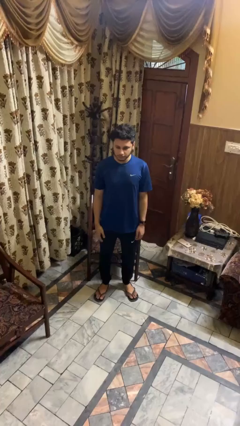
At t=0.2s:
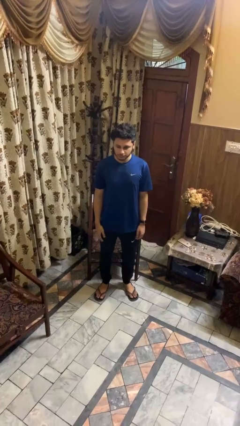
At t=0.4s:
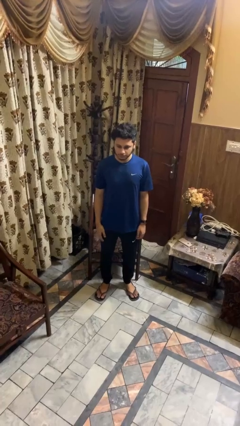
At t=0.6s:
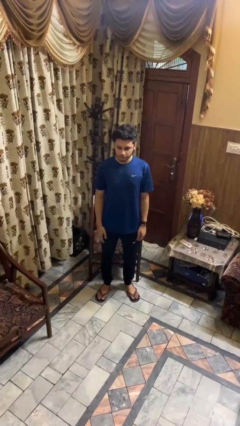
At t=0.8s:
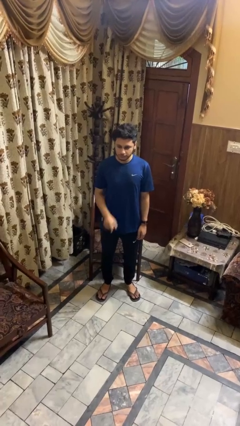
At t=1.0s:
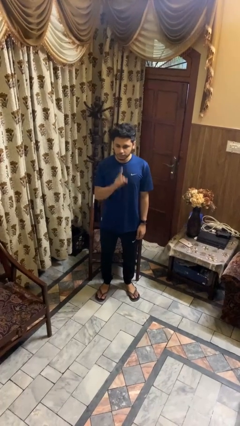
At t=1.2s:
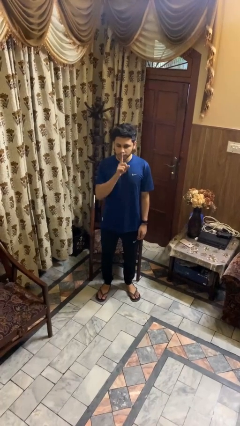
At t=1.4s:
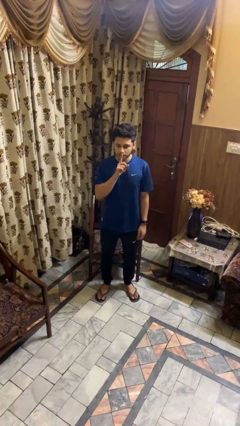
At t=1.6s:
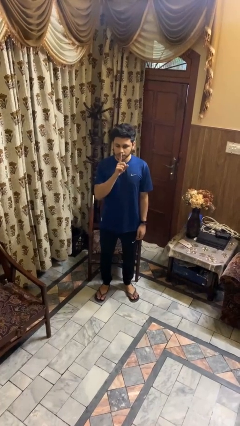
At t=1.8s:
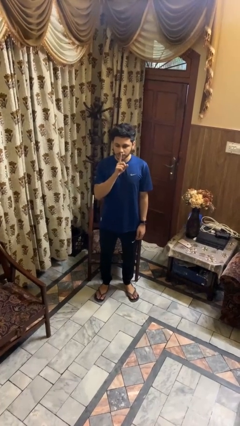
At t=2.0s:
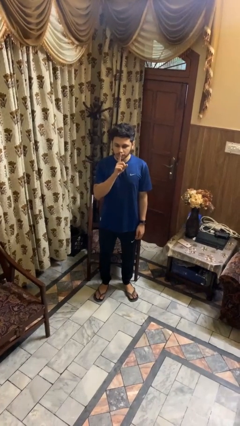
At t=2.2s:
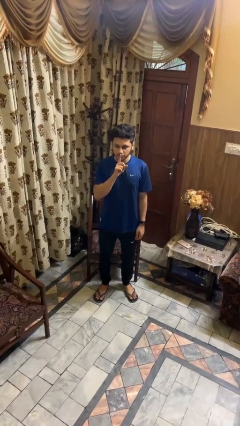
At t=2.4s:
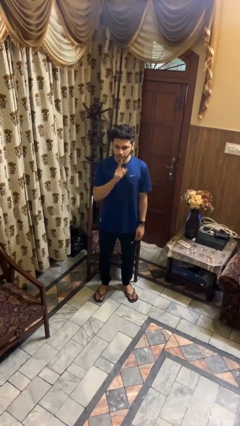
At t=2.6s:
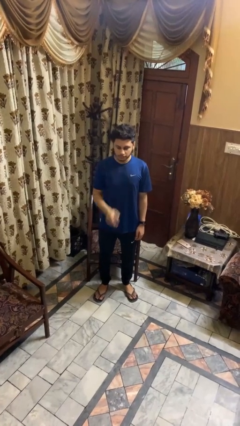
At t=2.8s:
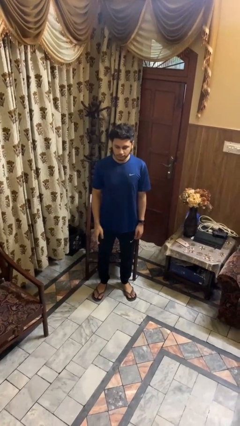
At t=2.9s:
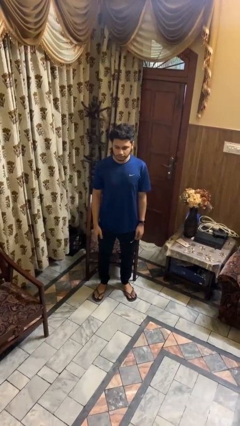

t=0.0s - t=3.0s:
person gestures be quiet

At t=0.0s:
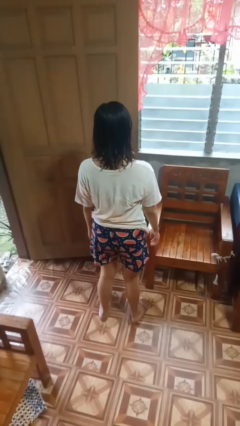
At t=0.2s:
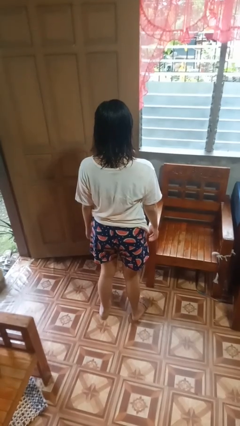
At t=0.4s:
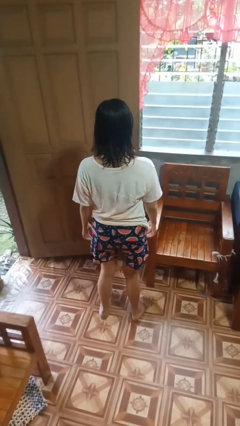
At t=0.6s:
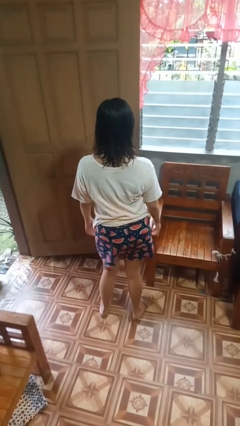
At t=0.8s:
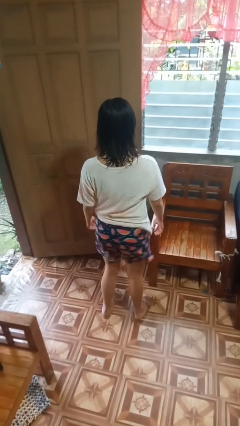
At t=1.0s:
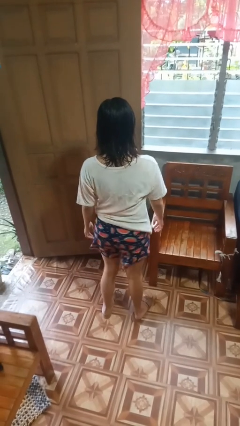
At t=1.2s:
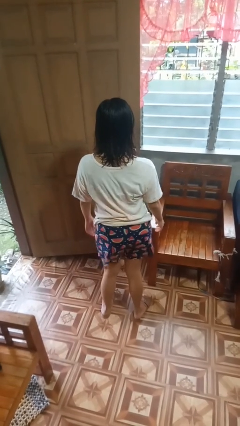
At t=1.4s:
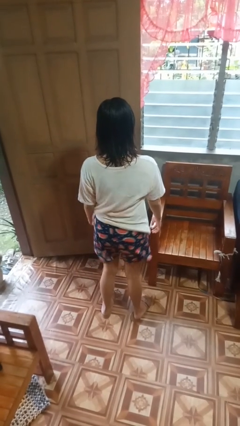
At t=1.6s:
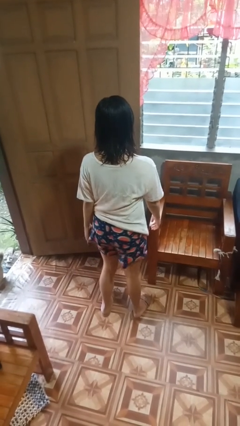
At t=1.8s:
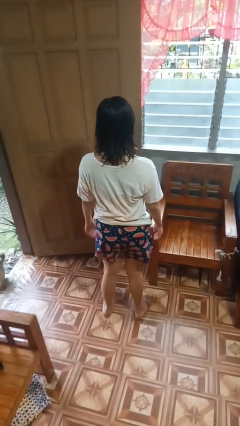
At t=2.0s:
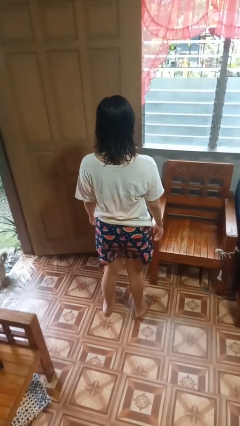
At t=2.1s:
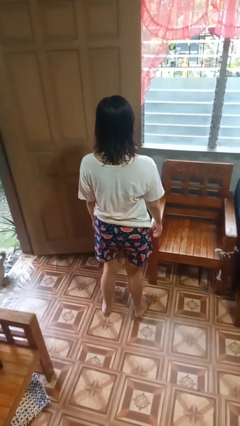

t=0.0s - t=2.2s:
person wiggles hips

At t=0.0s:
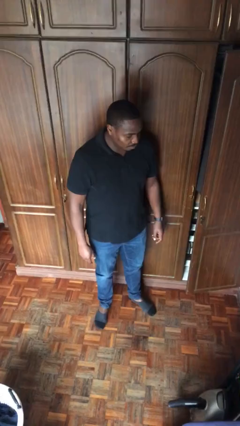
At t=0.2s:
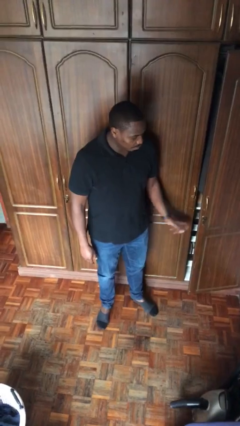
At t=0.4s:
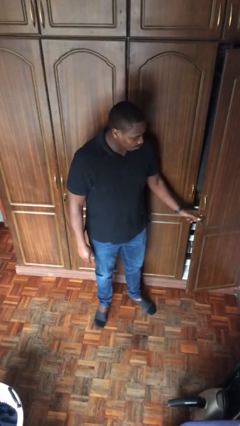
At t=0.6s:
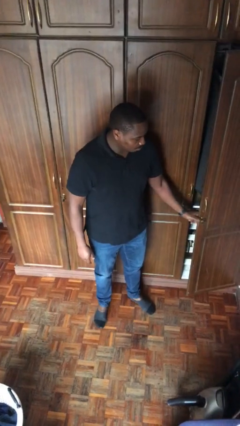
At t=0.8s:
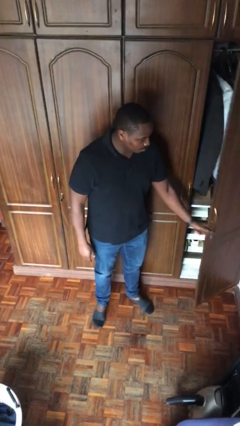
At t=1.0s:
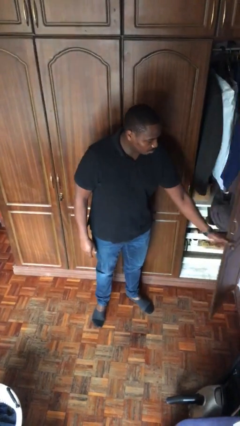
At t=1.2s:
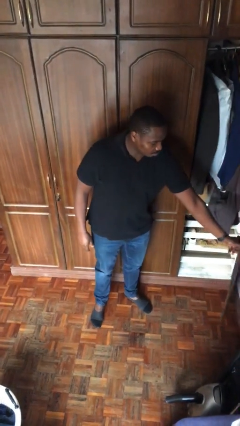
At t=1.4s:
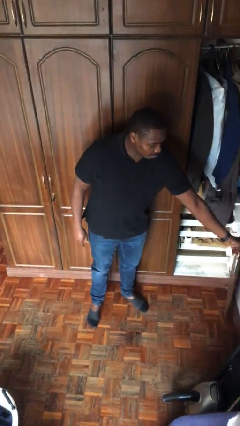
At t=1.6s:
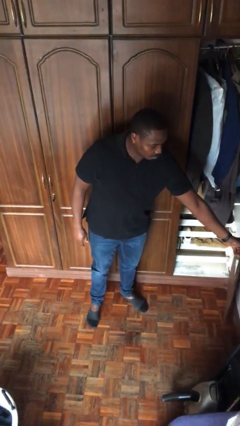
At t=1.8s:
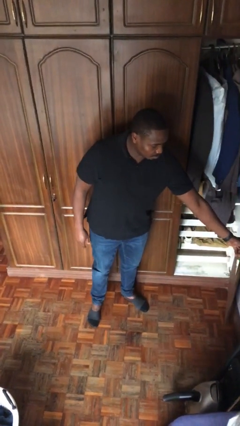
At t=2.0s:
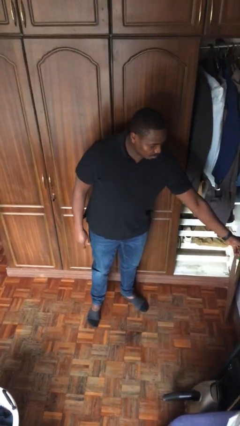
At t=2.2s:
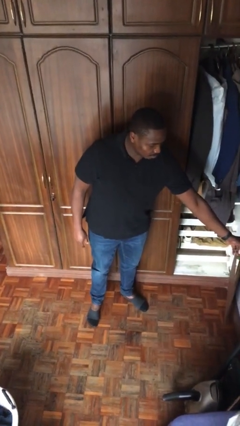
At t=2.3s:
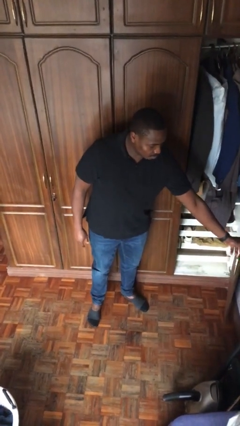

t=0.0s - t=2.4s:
person opens closet door

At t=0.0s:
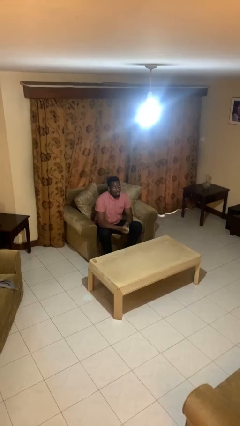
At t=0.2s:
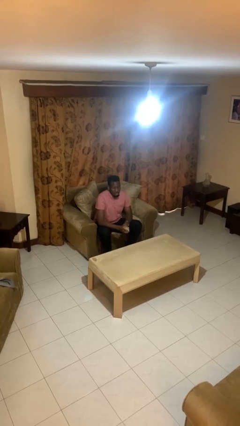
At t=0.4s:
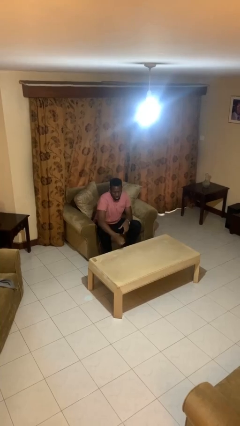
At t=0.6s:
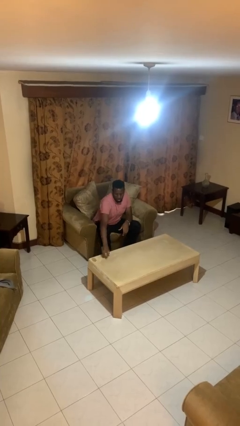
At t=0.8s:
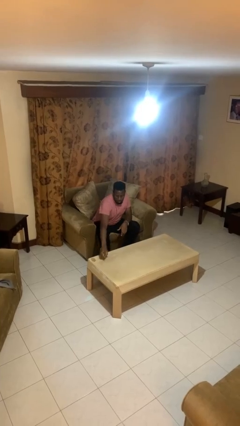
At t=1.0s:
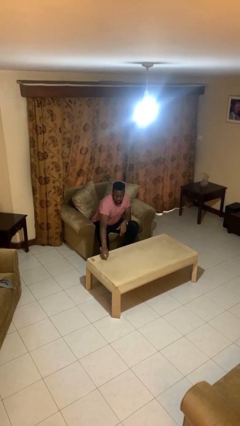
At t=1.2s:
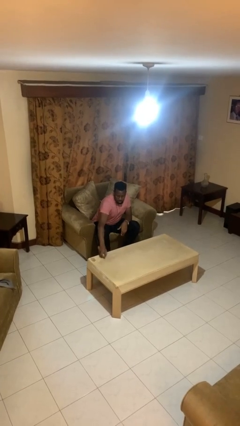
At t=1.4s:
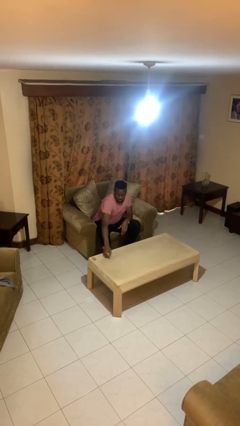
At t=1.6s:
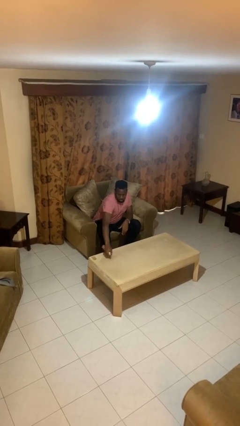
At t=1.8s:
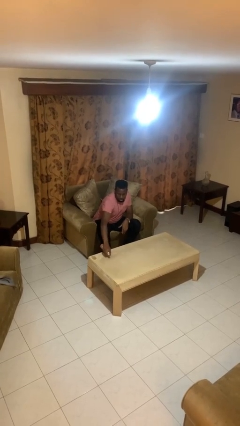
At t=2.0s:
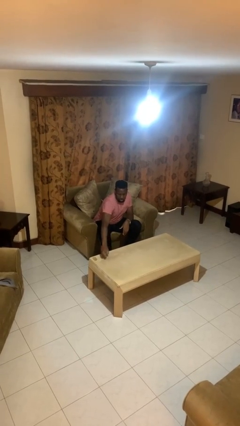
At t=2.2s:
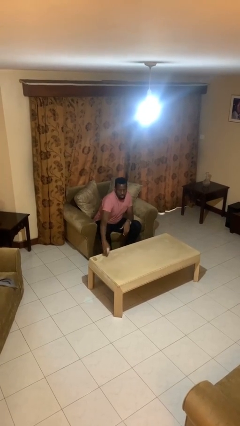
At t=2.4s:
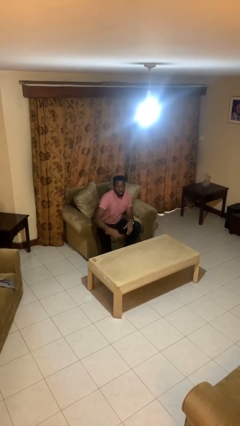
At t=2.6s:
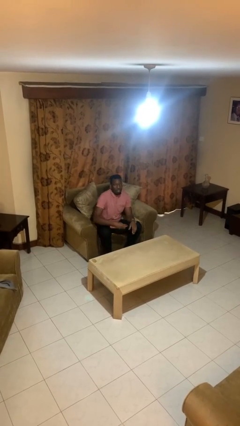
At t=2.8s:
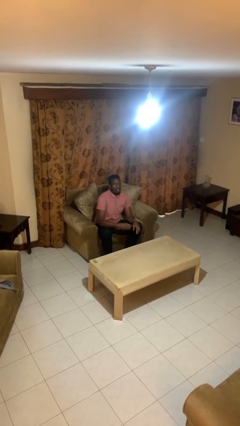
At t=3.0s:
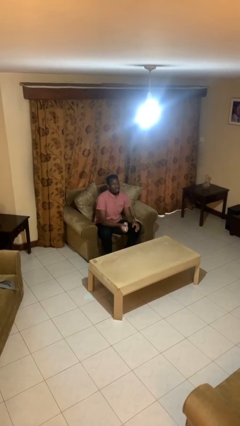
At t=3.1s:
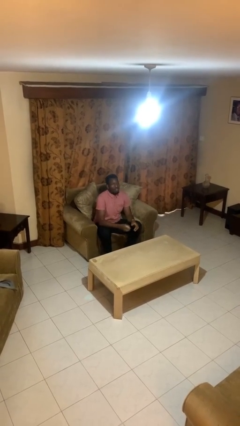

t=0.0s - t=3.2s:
person sprays from bottle

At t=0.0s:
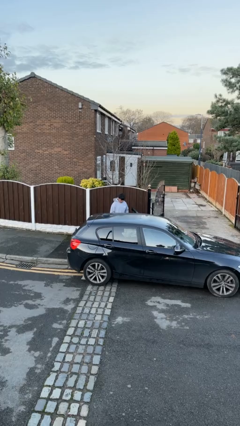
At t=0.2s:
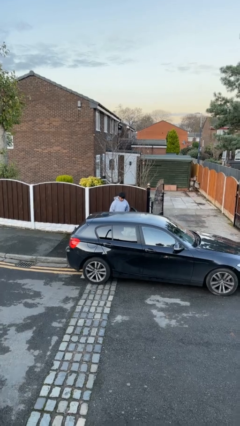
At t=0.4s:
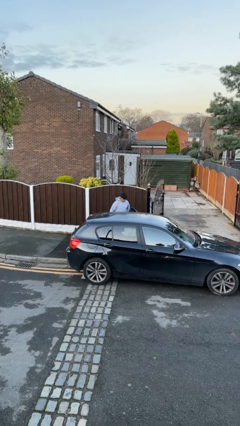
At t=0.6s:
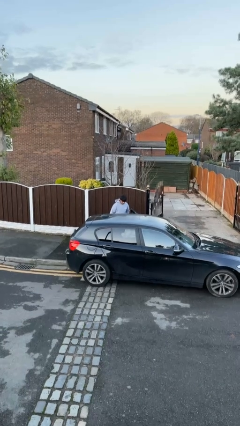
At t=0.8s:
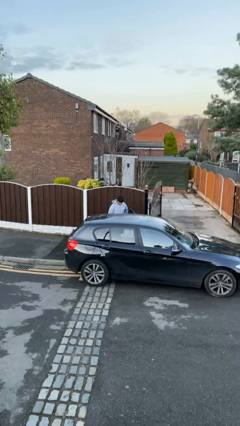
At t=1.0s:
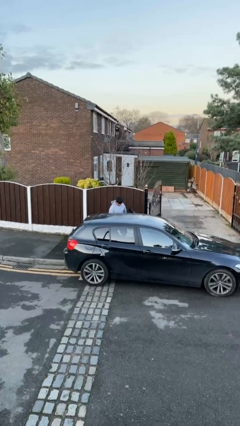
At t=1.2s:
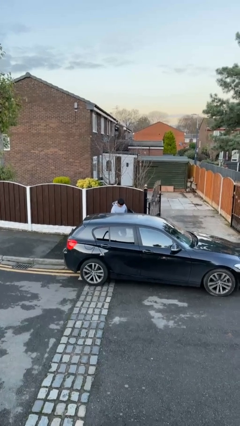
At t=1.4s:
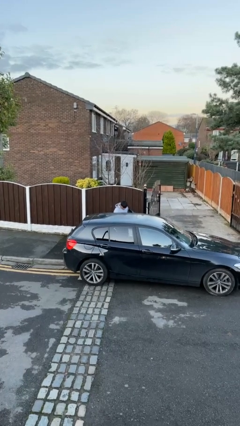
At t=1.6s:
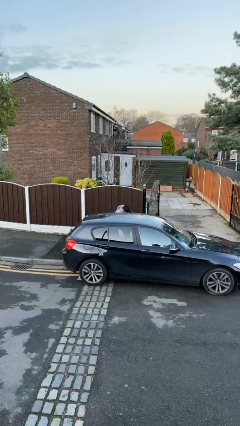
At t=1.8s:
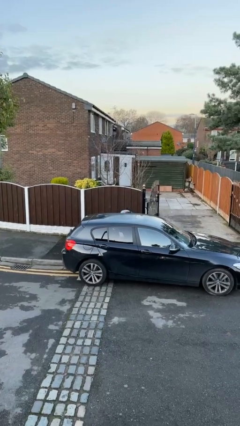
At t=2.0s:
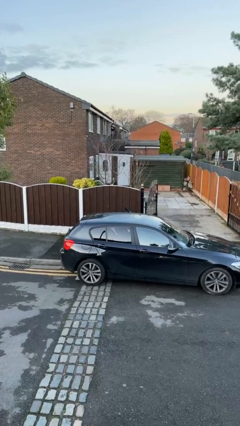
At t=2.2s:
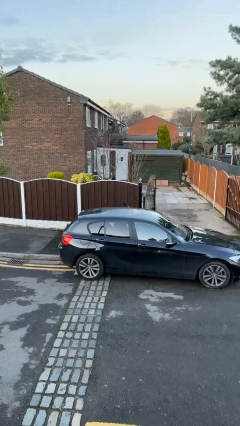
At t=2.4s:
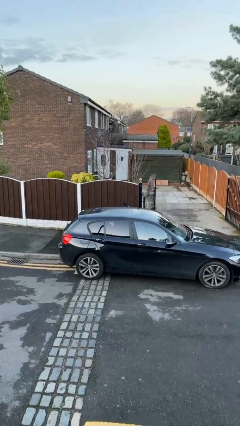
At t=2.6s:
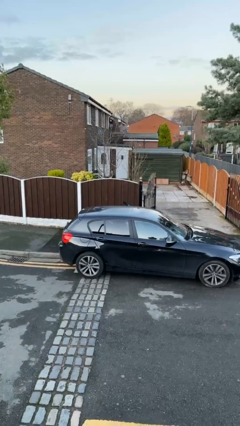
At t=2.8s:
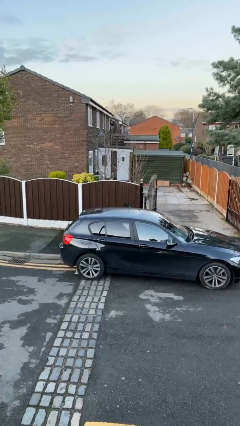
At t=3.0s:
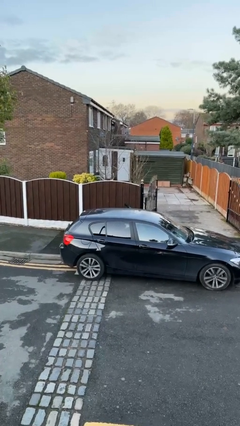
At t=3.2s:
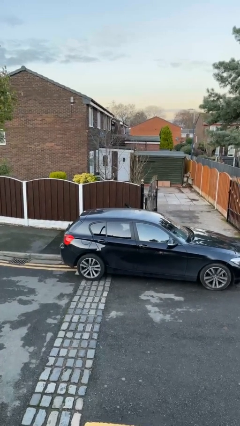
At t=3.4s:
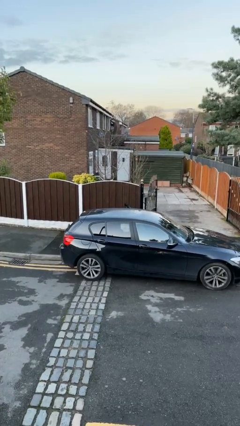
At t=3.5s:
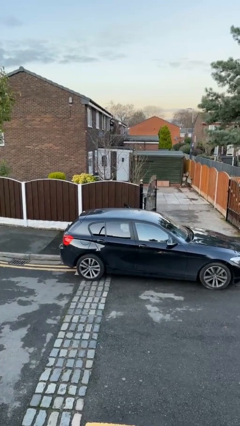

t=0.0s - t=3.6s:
person enters car

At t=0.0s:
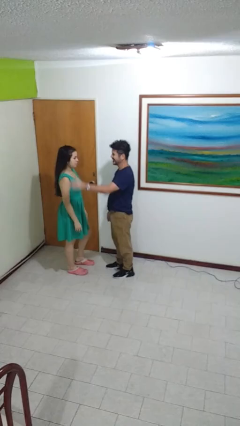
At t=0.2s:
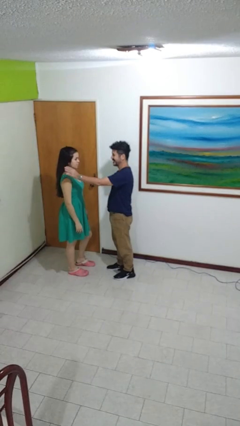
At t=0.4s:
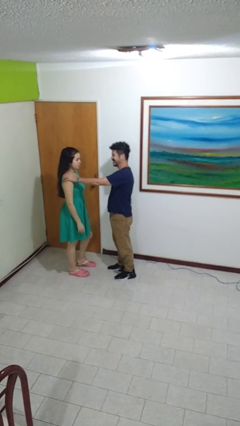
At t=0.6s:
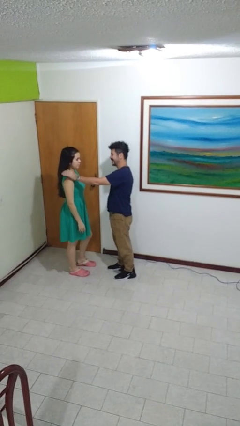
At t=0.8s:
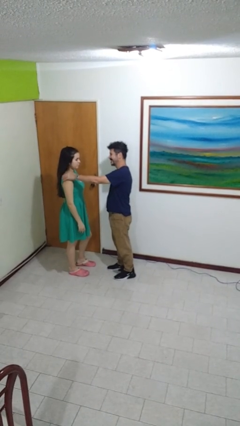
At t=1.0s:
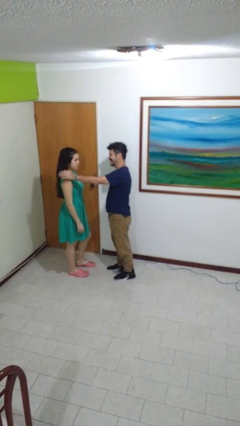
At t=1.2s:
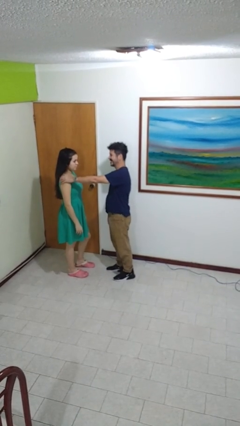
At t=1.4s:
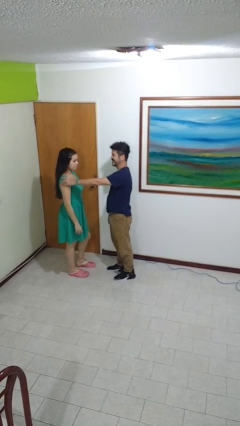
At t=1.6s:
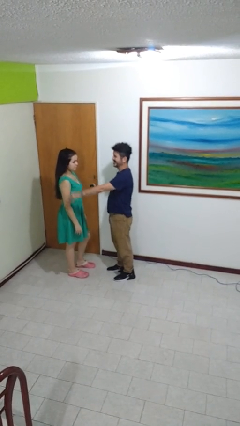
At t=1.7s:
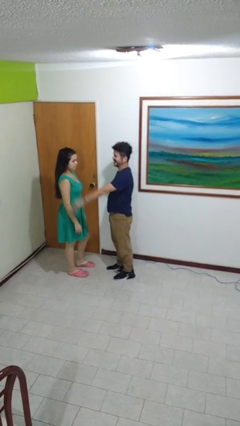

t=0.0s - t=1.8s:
person pounds shoulders of person

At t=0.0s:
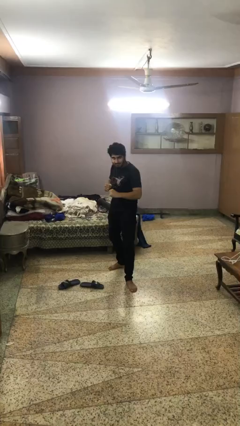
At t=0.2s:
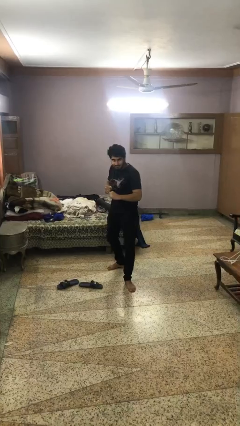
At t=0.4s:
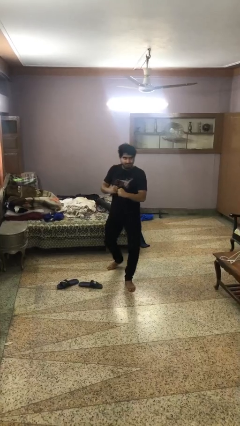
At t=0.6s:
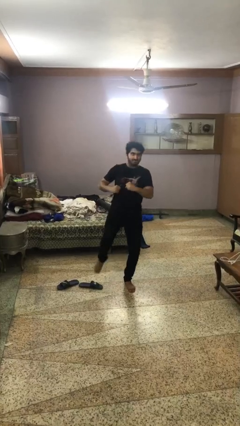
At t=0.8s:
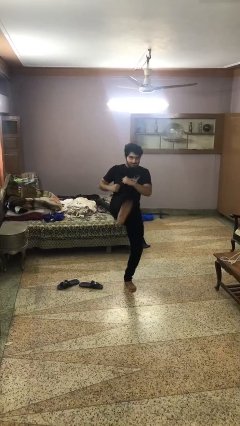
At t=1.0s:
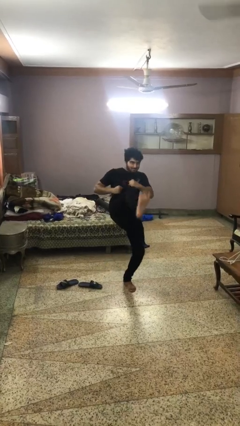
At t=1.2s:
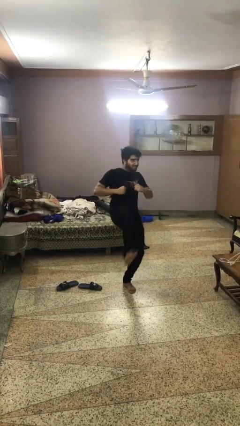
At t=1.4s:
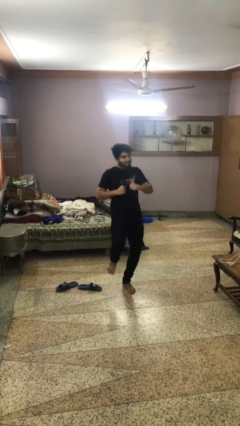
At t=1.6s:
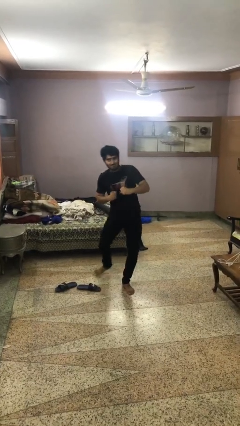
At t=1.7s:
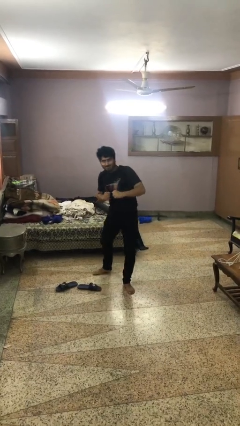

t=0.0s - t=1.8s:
person karate kicks
